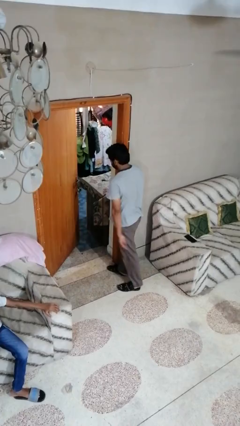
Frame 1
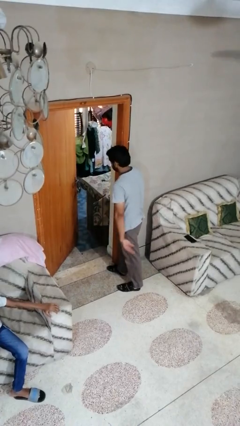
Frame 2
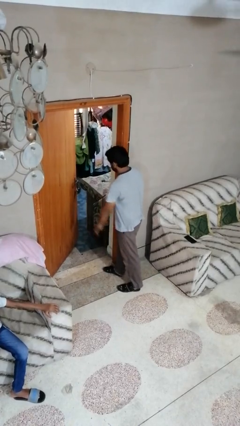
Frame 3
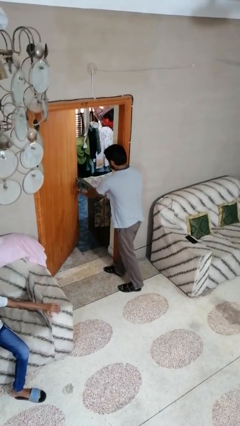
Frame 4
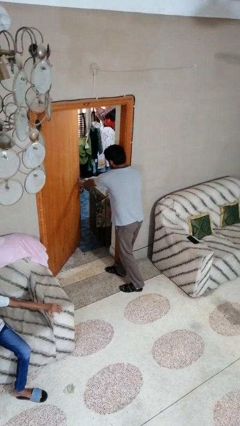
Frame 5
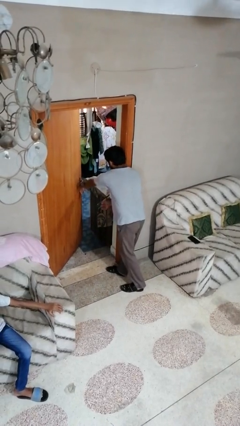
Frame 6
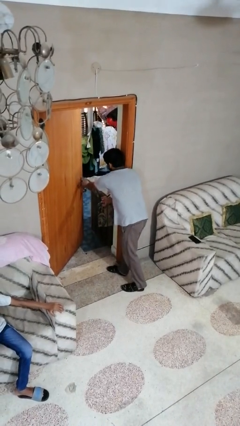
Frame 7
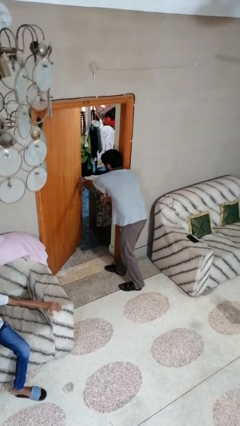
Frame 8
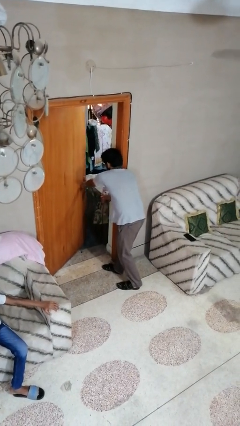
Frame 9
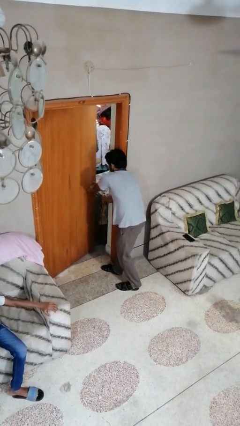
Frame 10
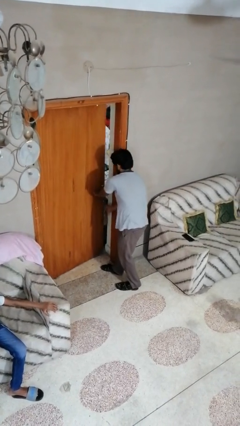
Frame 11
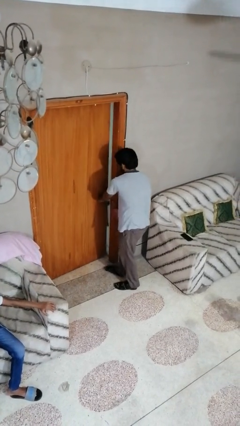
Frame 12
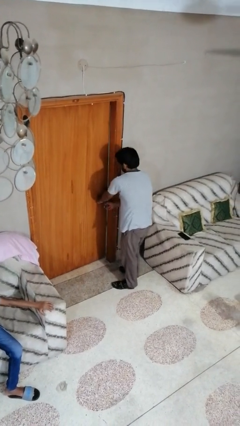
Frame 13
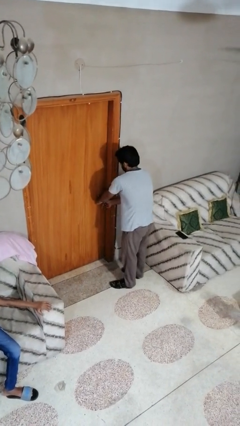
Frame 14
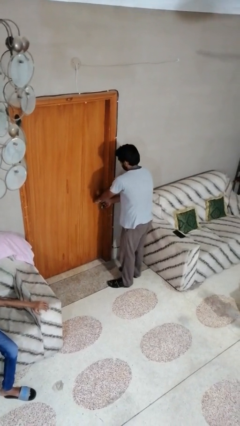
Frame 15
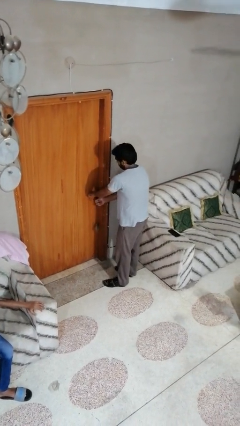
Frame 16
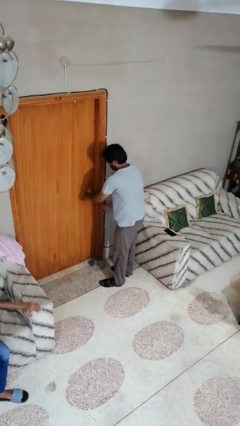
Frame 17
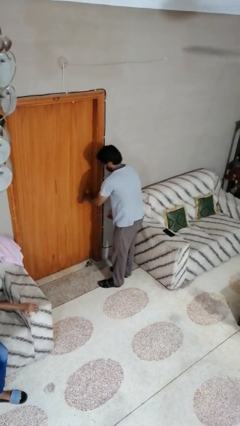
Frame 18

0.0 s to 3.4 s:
person closes facility door

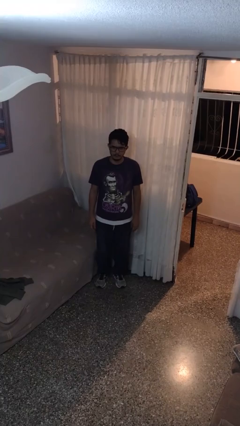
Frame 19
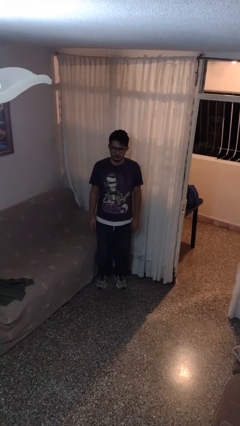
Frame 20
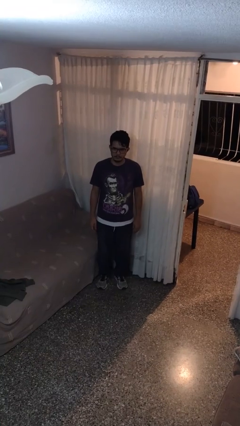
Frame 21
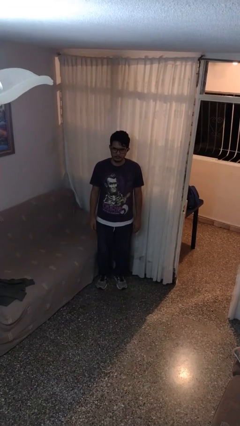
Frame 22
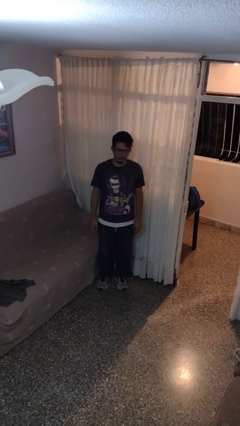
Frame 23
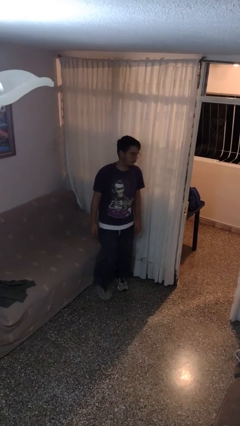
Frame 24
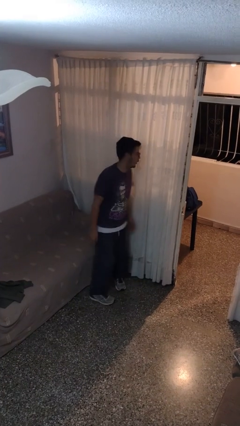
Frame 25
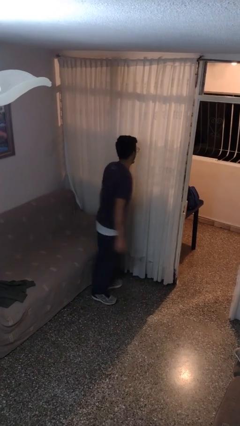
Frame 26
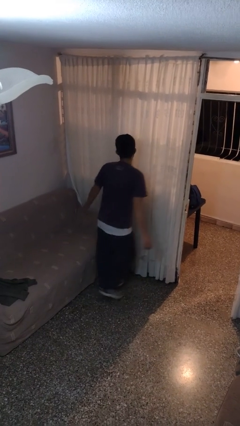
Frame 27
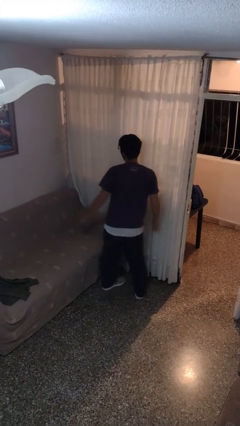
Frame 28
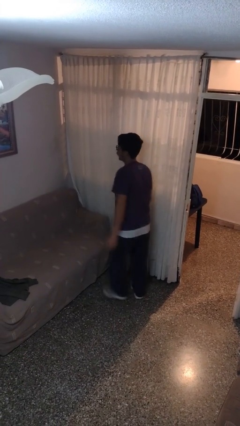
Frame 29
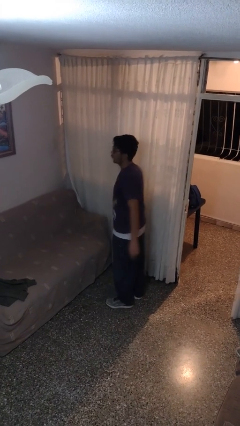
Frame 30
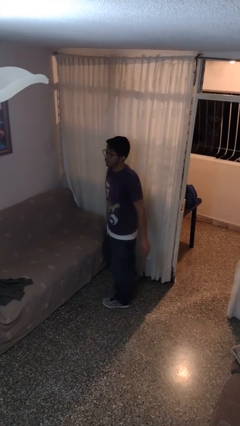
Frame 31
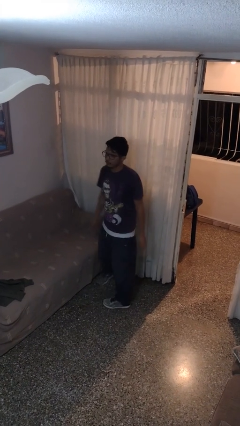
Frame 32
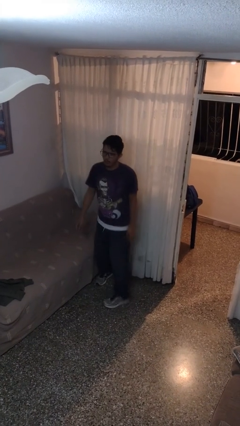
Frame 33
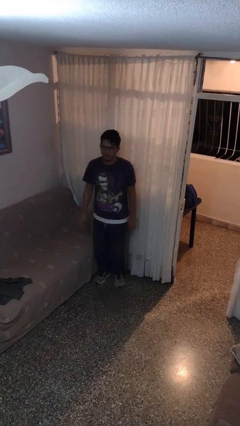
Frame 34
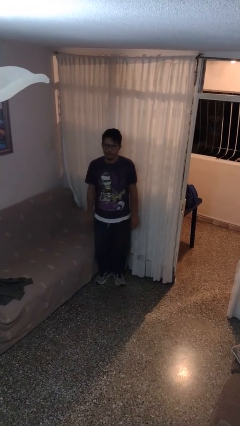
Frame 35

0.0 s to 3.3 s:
person twirls

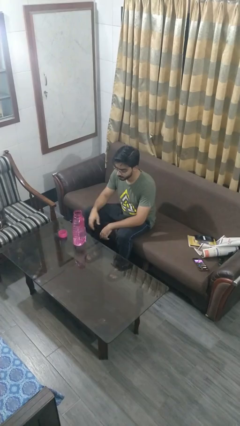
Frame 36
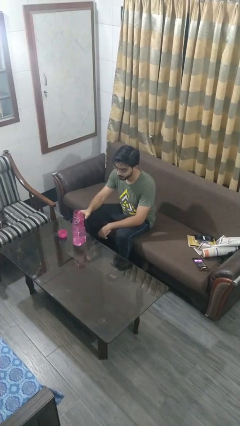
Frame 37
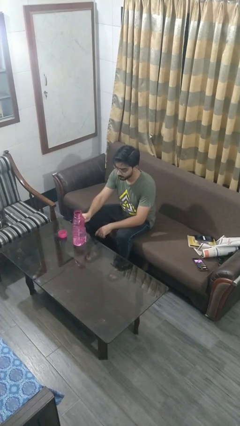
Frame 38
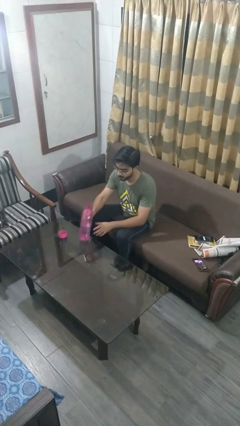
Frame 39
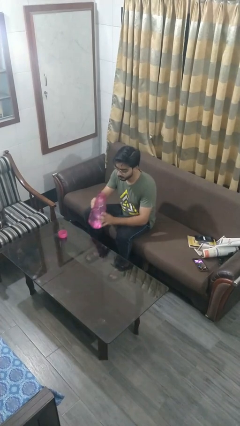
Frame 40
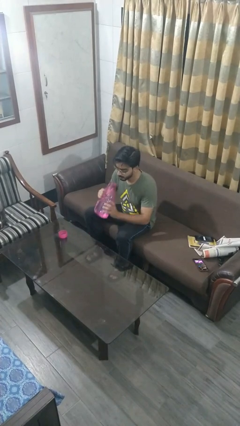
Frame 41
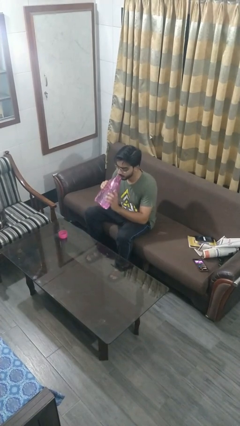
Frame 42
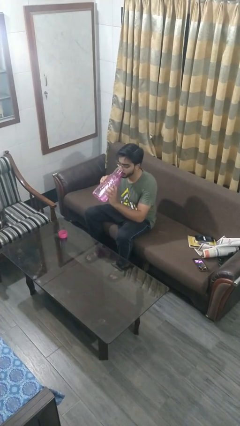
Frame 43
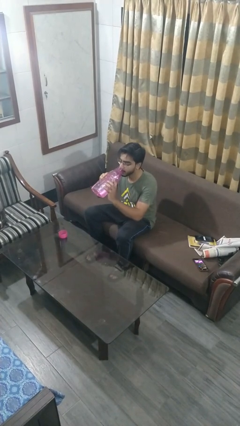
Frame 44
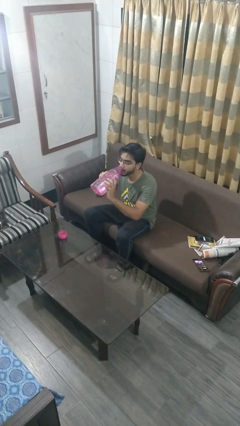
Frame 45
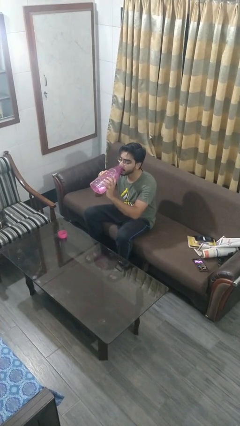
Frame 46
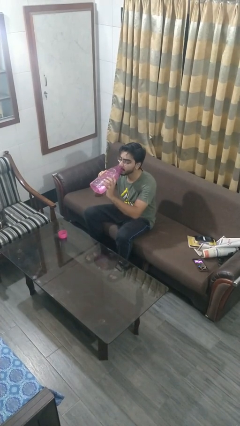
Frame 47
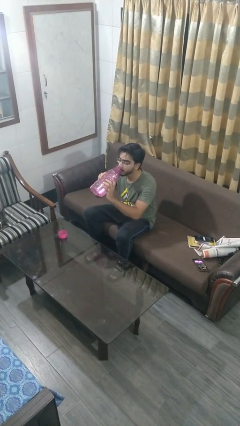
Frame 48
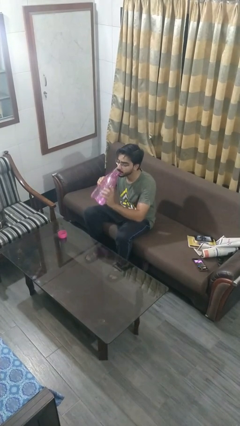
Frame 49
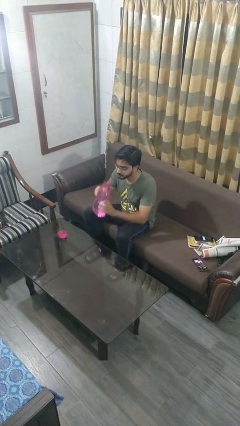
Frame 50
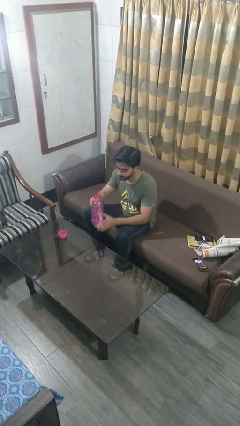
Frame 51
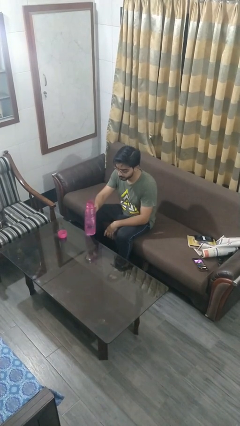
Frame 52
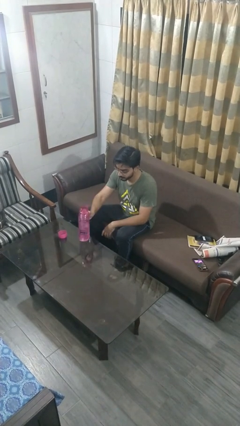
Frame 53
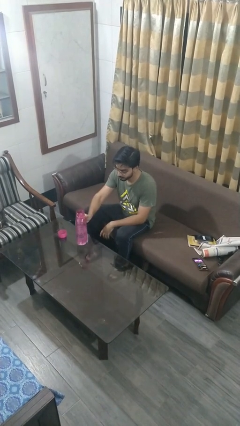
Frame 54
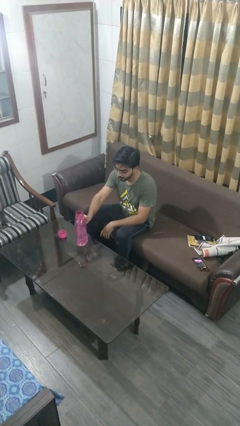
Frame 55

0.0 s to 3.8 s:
person drinks from bottle

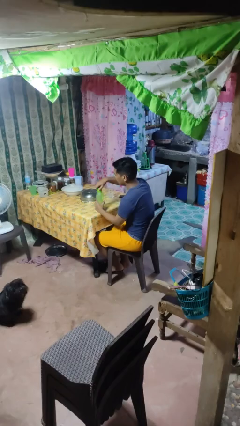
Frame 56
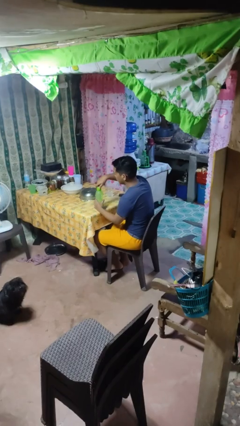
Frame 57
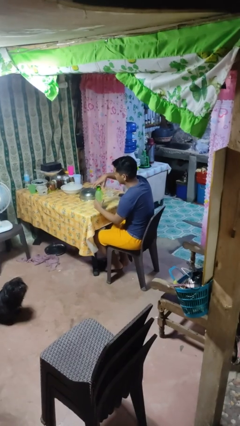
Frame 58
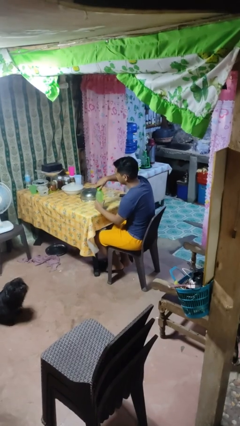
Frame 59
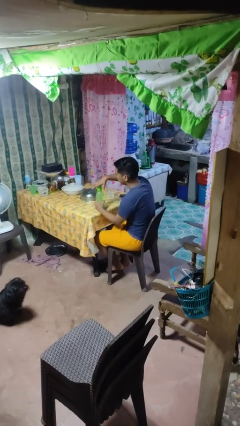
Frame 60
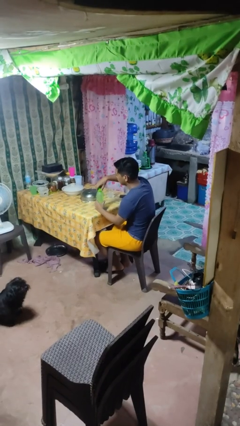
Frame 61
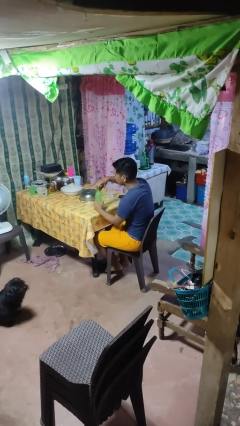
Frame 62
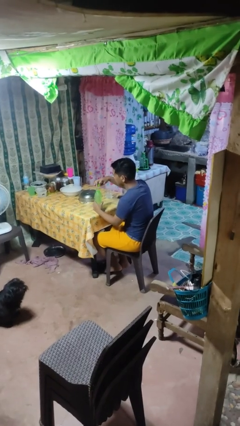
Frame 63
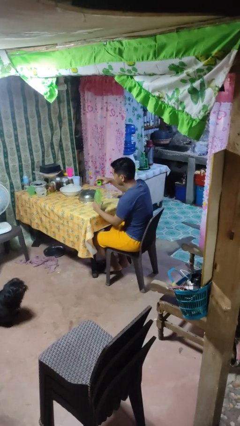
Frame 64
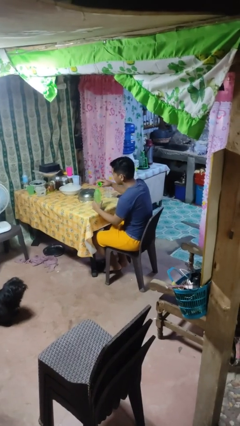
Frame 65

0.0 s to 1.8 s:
person unscrews lid from bottle

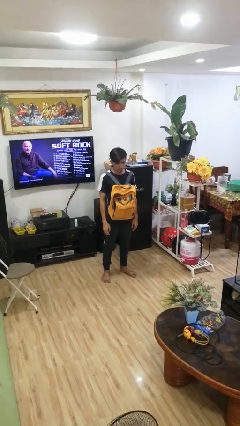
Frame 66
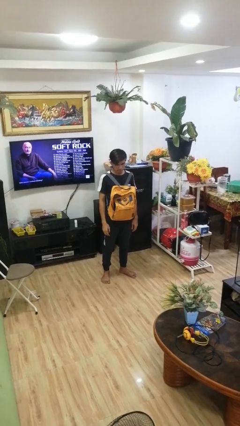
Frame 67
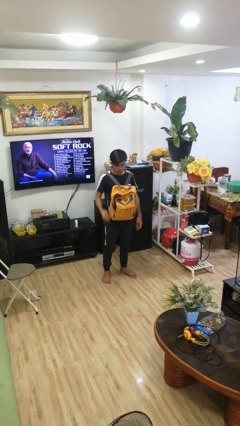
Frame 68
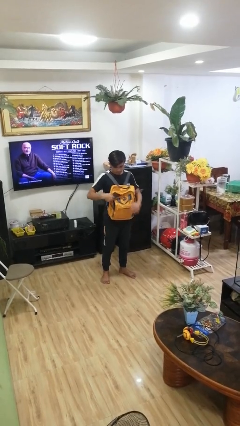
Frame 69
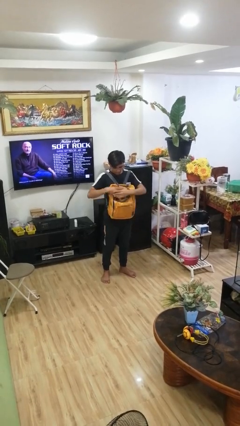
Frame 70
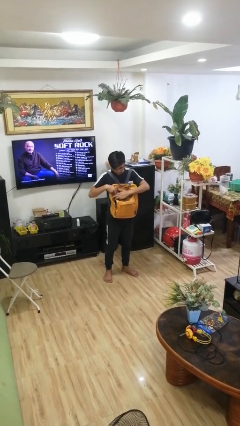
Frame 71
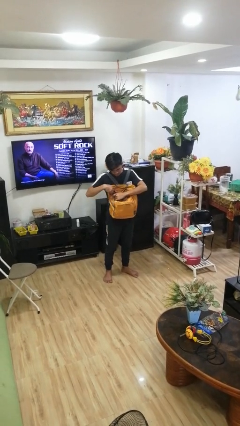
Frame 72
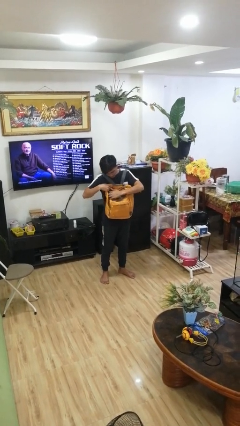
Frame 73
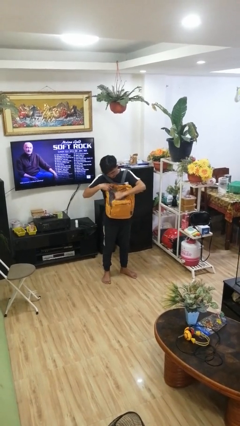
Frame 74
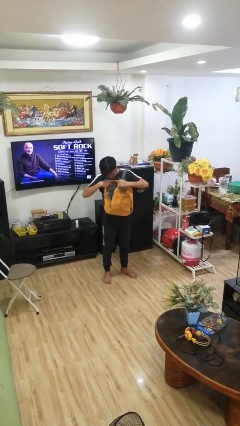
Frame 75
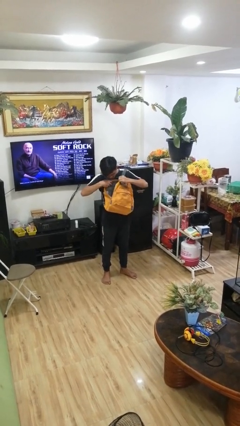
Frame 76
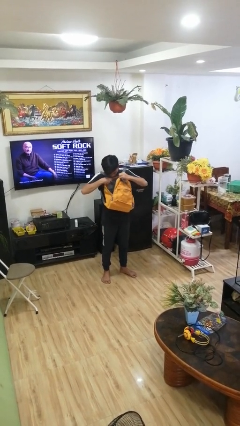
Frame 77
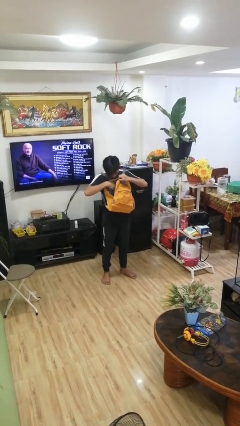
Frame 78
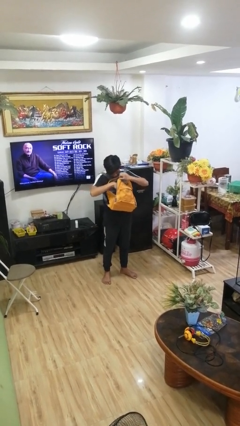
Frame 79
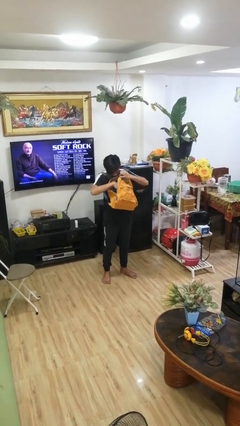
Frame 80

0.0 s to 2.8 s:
person searches in backpack

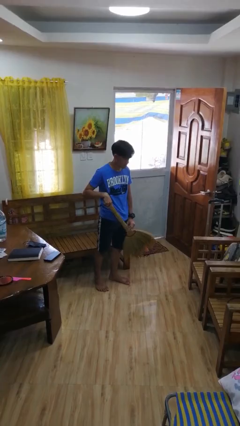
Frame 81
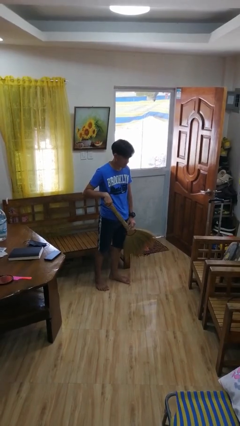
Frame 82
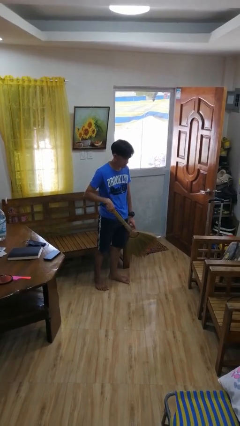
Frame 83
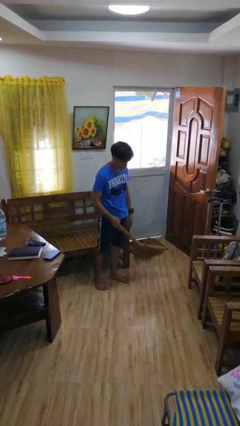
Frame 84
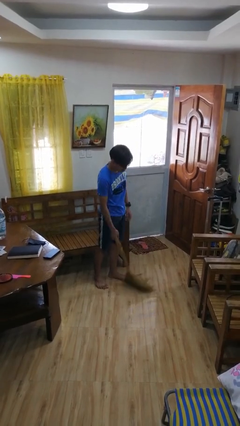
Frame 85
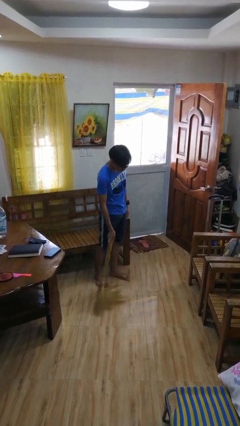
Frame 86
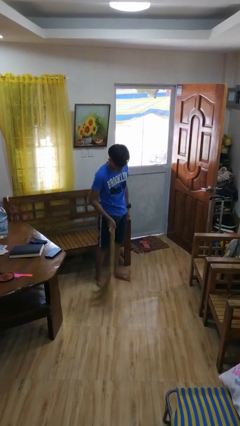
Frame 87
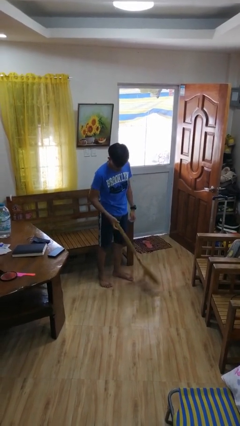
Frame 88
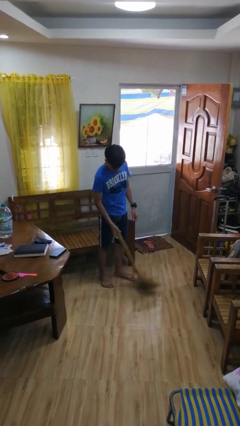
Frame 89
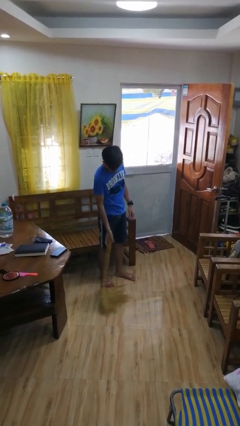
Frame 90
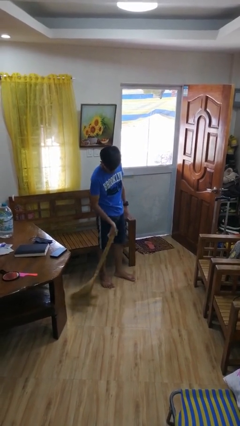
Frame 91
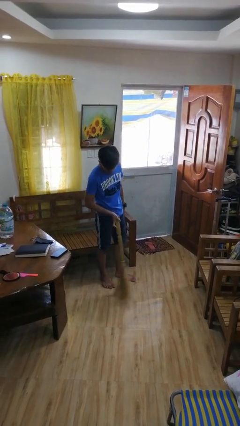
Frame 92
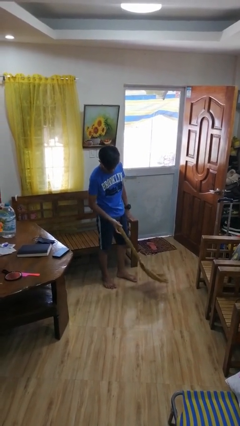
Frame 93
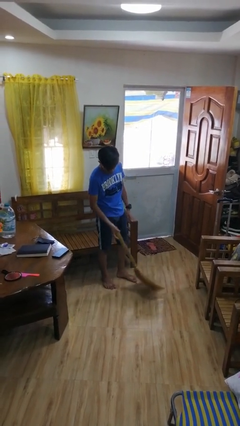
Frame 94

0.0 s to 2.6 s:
person sweeps floor
